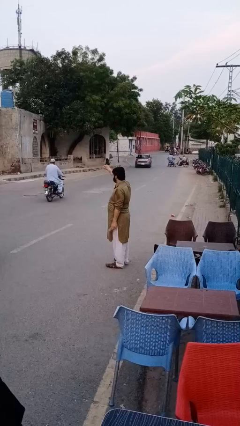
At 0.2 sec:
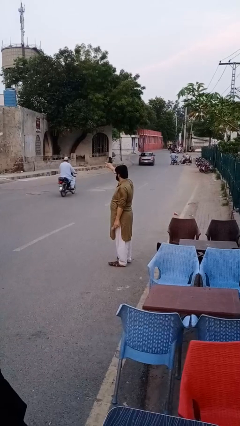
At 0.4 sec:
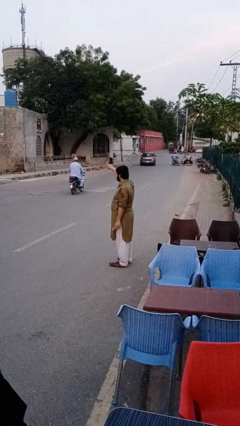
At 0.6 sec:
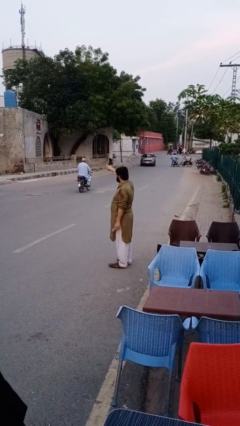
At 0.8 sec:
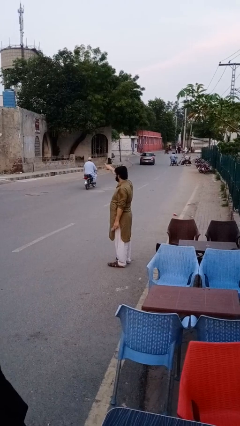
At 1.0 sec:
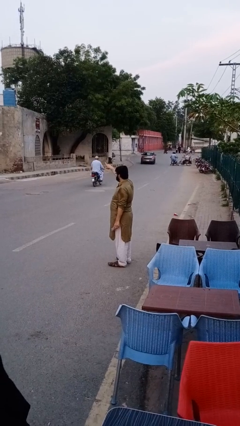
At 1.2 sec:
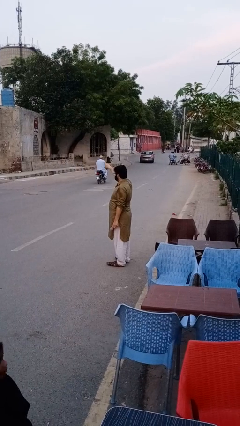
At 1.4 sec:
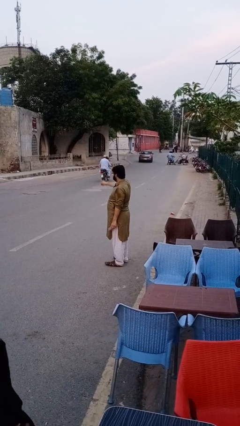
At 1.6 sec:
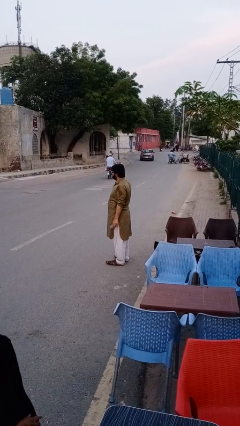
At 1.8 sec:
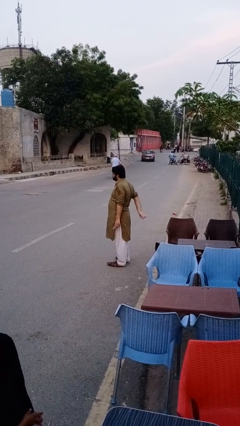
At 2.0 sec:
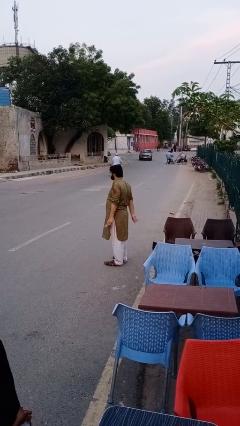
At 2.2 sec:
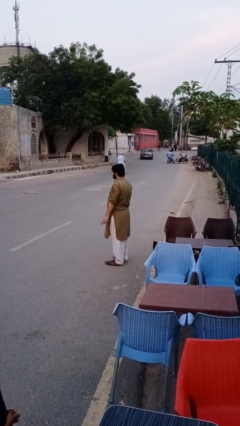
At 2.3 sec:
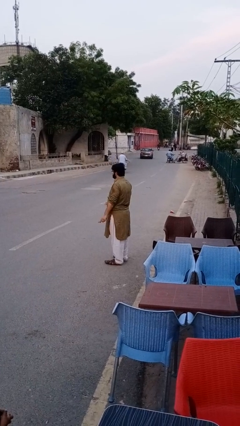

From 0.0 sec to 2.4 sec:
person takes phone from pocket

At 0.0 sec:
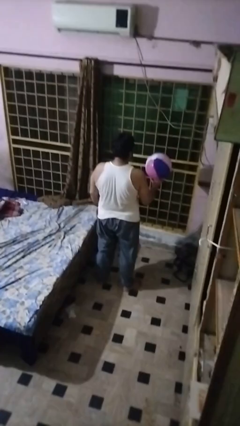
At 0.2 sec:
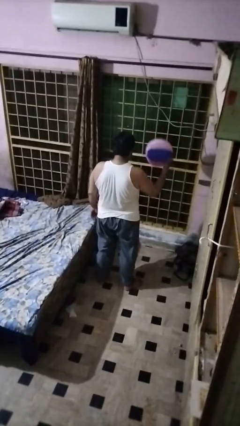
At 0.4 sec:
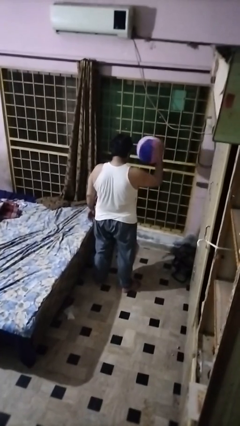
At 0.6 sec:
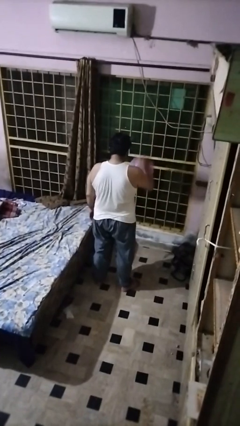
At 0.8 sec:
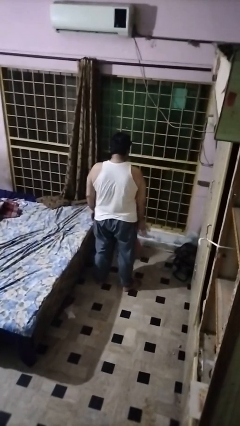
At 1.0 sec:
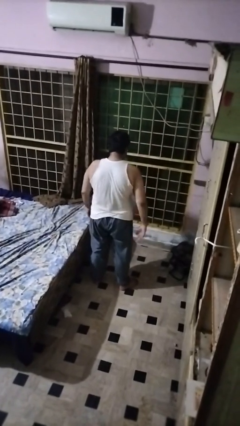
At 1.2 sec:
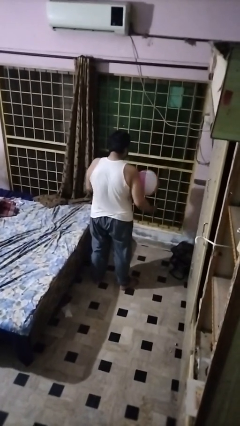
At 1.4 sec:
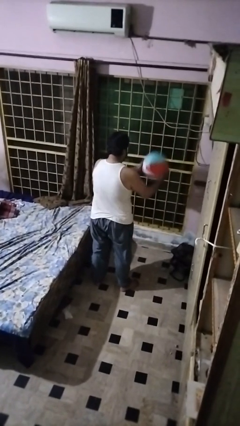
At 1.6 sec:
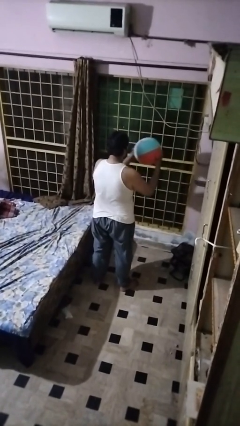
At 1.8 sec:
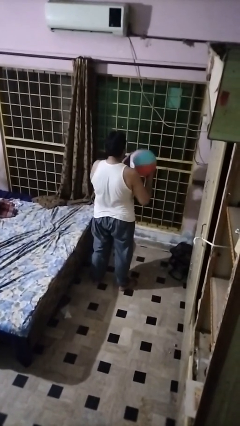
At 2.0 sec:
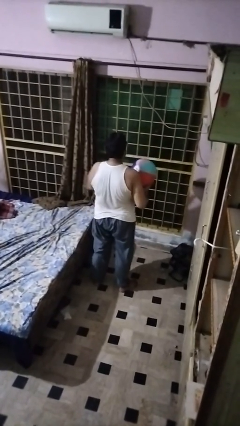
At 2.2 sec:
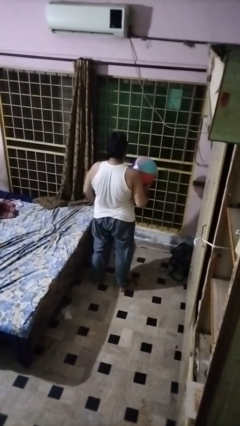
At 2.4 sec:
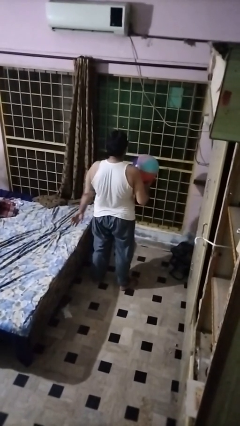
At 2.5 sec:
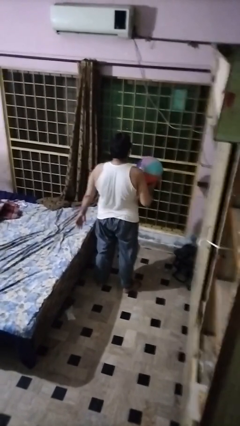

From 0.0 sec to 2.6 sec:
person bounces ball on floor

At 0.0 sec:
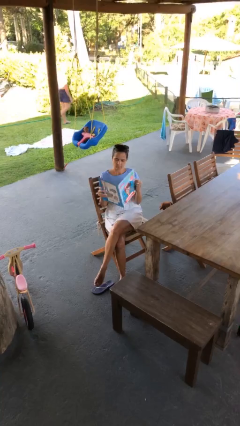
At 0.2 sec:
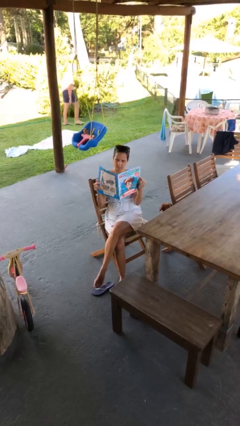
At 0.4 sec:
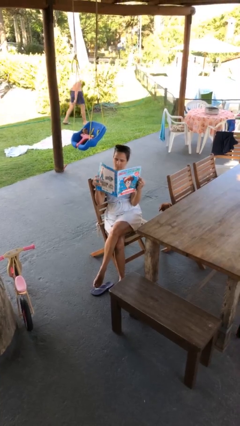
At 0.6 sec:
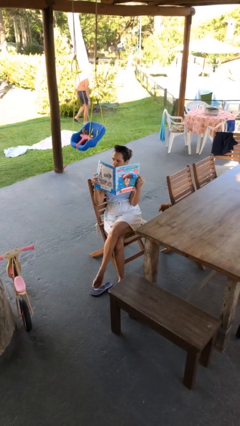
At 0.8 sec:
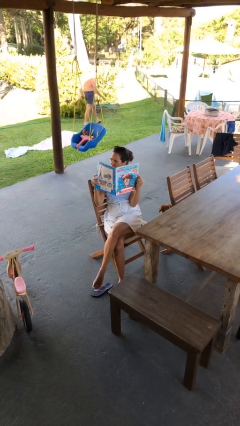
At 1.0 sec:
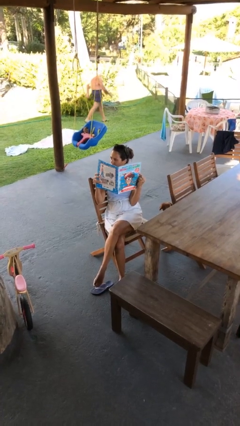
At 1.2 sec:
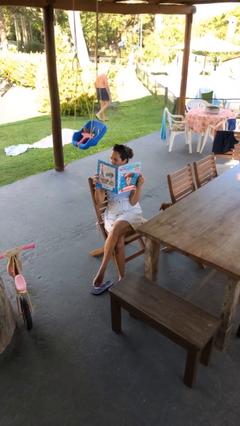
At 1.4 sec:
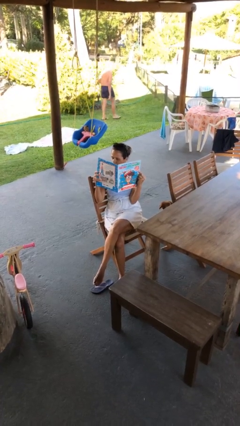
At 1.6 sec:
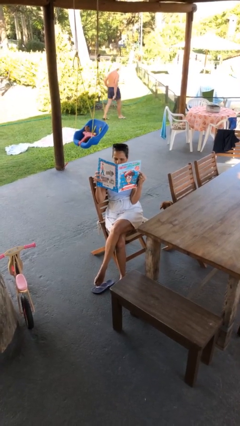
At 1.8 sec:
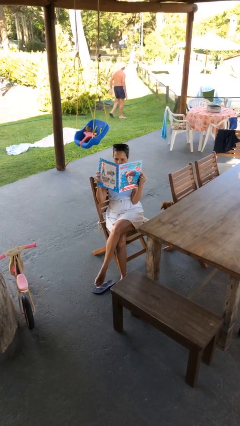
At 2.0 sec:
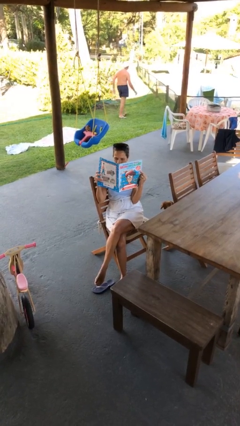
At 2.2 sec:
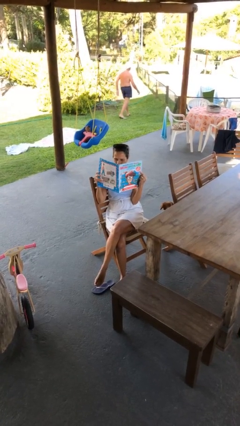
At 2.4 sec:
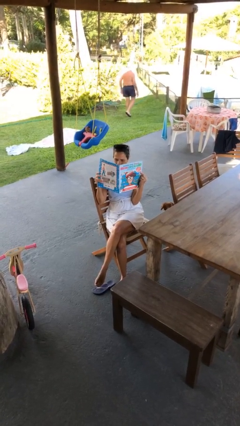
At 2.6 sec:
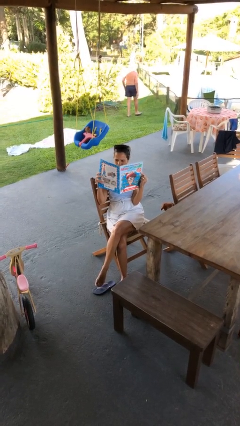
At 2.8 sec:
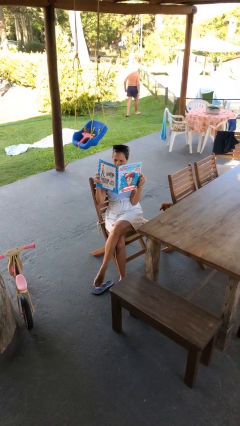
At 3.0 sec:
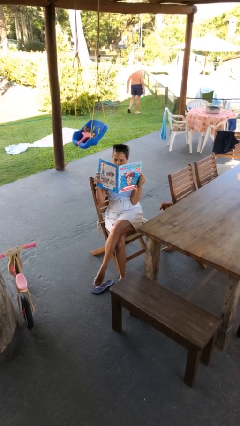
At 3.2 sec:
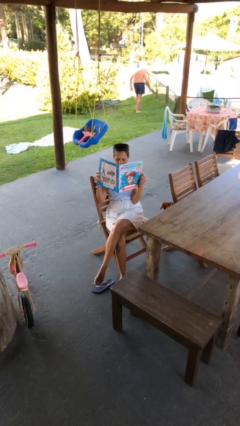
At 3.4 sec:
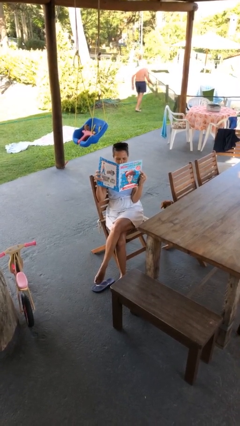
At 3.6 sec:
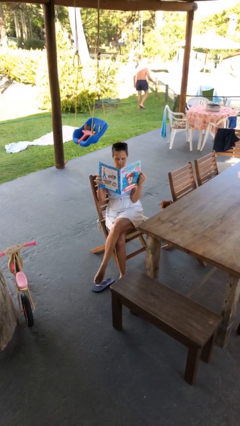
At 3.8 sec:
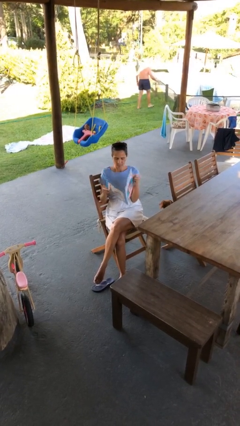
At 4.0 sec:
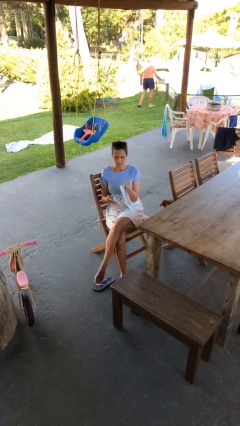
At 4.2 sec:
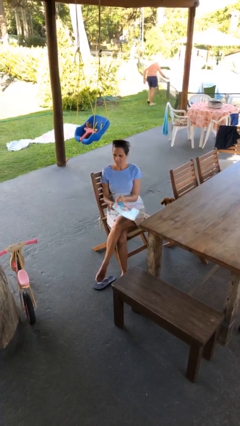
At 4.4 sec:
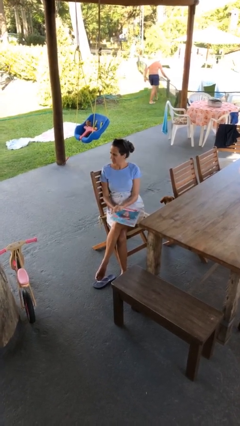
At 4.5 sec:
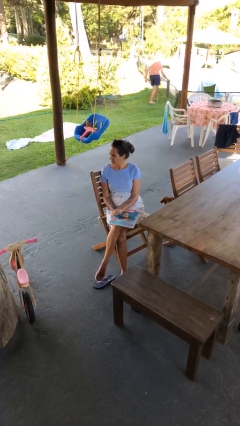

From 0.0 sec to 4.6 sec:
person reads document

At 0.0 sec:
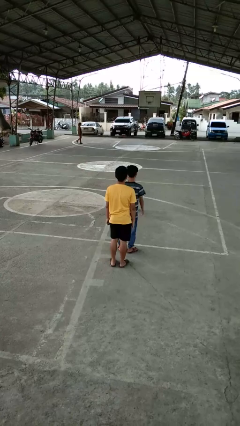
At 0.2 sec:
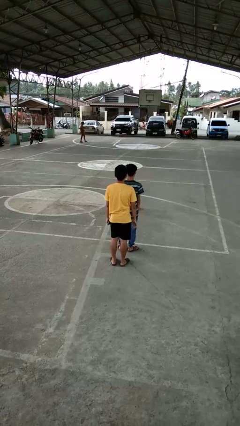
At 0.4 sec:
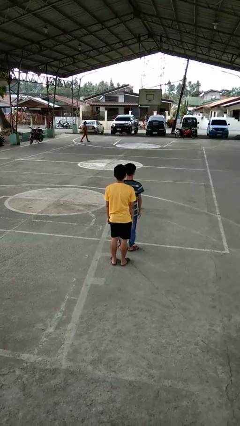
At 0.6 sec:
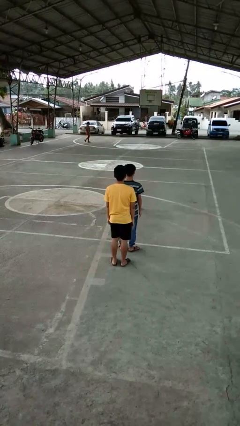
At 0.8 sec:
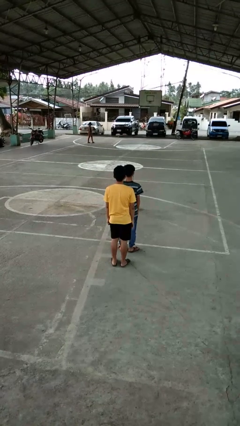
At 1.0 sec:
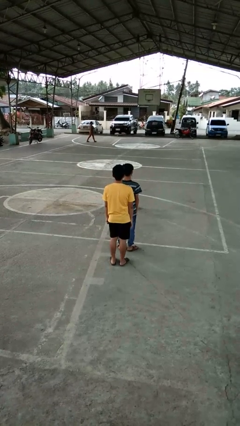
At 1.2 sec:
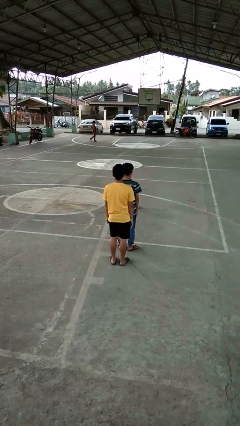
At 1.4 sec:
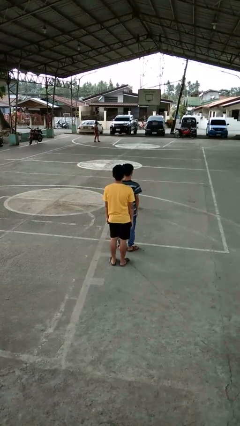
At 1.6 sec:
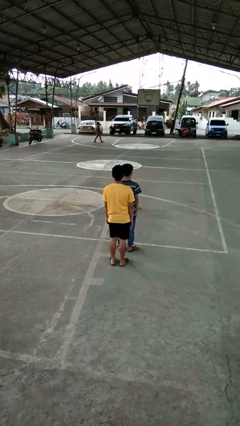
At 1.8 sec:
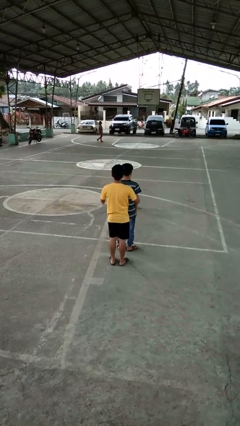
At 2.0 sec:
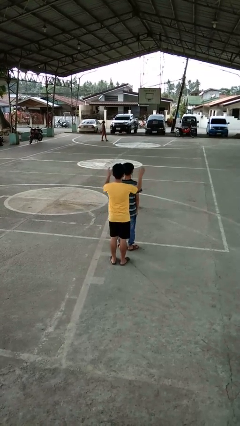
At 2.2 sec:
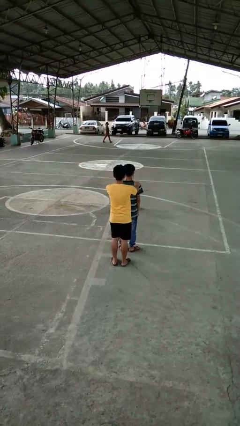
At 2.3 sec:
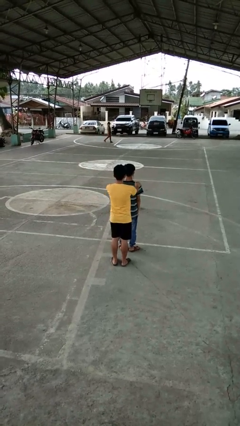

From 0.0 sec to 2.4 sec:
person spins person around

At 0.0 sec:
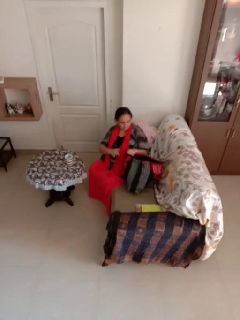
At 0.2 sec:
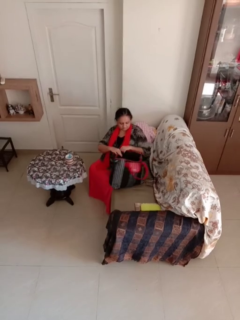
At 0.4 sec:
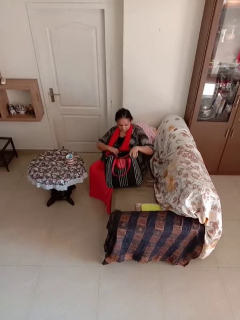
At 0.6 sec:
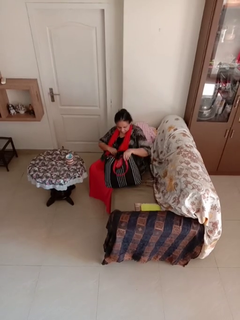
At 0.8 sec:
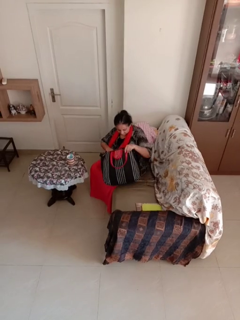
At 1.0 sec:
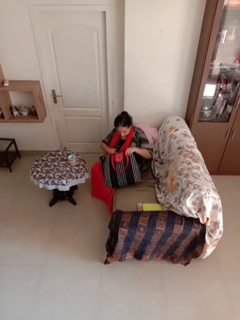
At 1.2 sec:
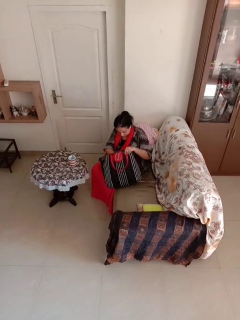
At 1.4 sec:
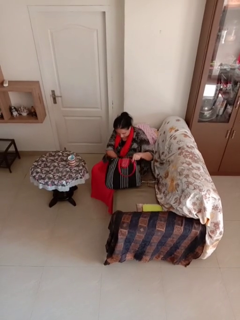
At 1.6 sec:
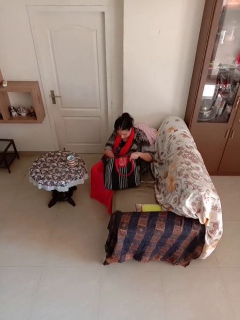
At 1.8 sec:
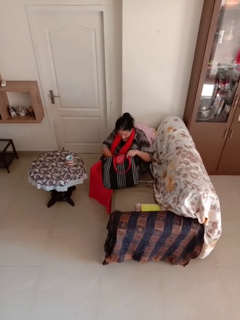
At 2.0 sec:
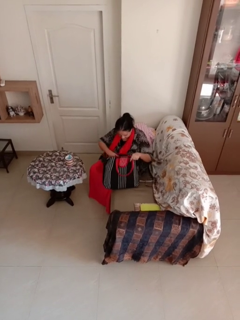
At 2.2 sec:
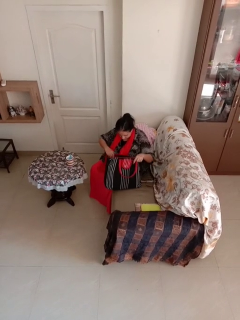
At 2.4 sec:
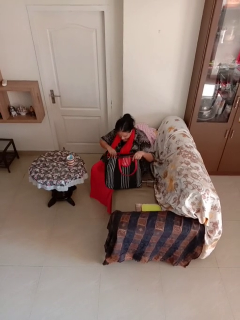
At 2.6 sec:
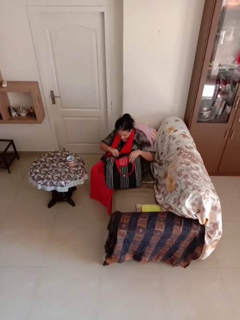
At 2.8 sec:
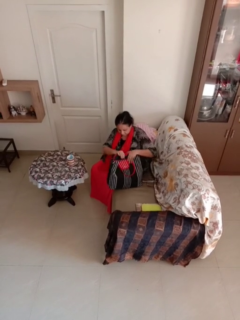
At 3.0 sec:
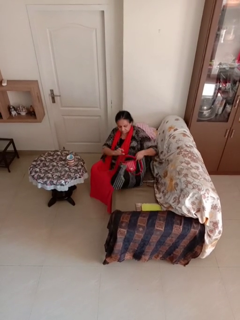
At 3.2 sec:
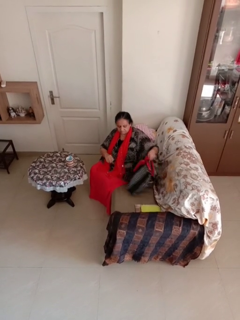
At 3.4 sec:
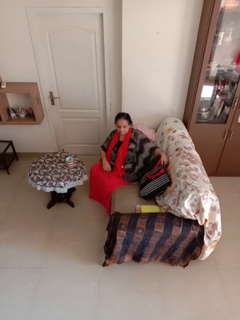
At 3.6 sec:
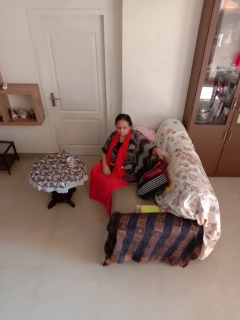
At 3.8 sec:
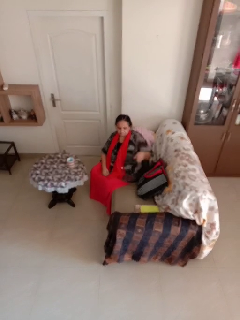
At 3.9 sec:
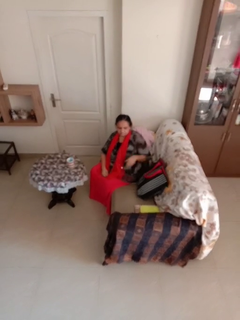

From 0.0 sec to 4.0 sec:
person searches in bag

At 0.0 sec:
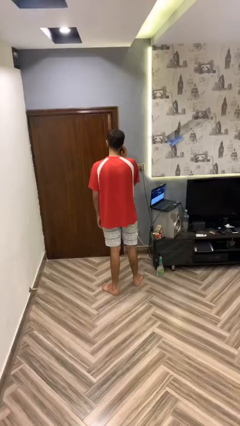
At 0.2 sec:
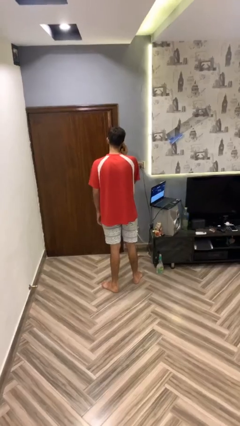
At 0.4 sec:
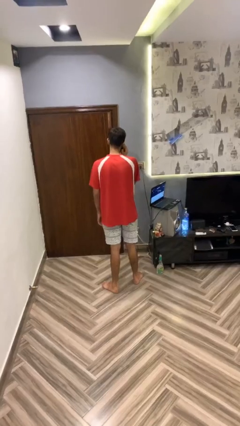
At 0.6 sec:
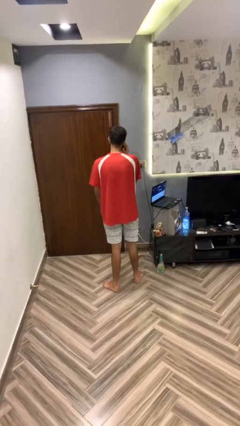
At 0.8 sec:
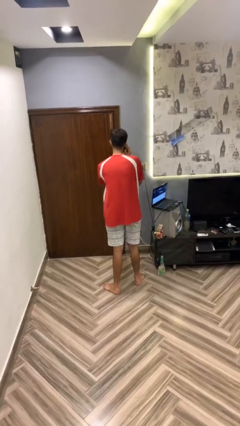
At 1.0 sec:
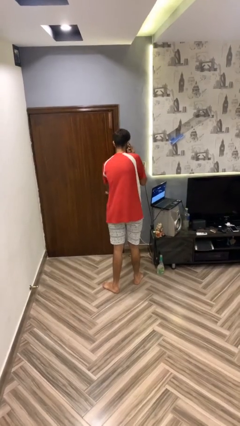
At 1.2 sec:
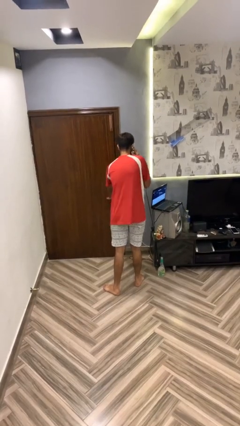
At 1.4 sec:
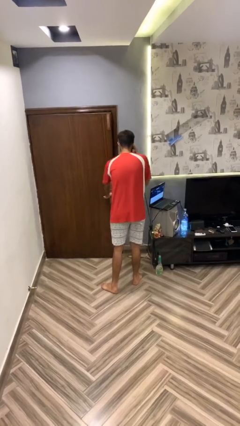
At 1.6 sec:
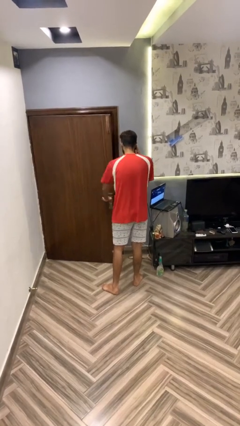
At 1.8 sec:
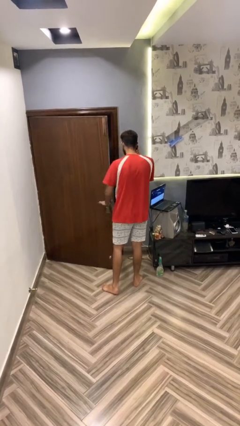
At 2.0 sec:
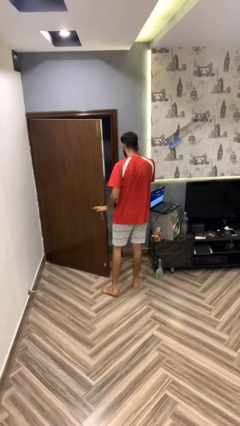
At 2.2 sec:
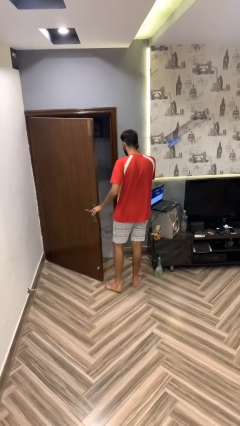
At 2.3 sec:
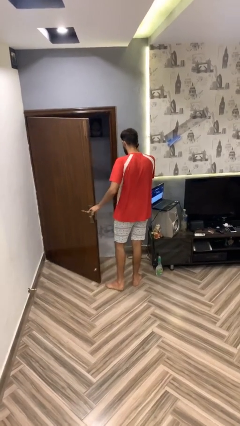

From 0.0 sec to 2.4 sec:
person opens facility door
